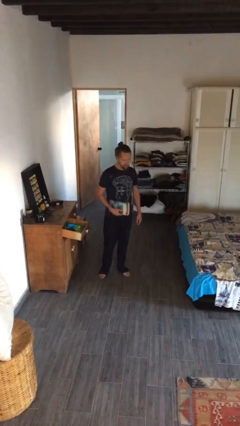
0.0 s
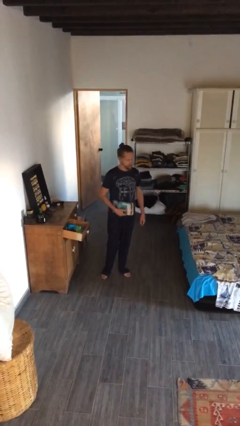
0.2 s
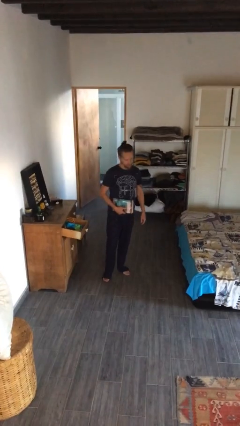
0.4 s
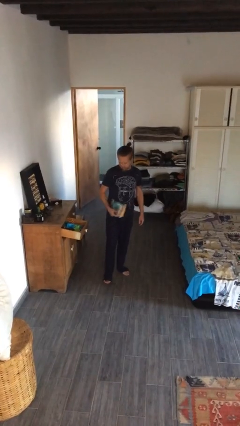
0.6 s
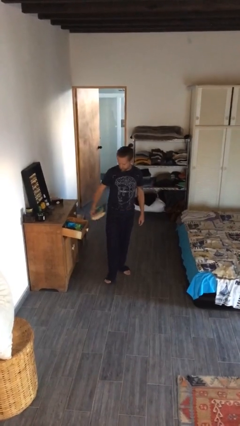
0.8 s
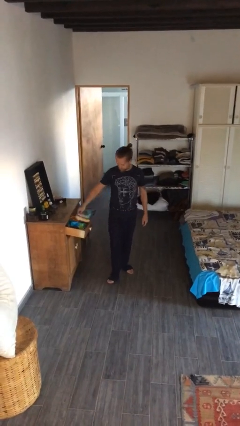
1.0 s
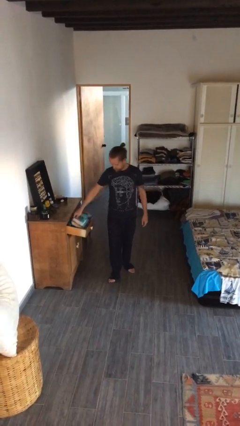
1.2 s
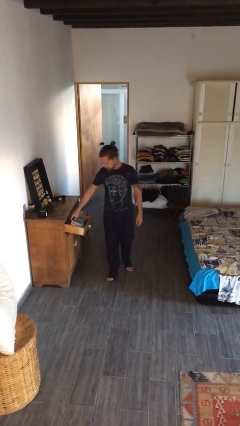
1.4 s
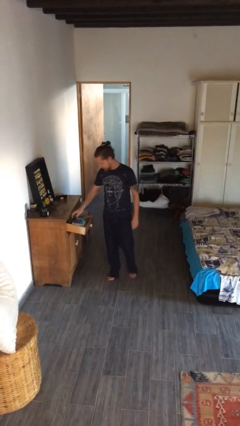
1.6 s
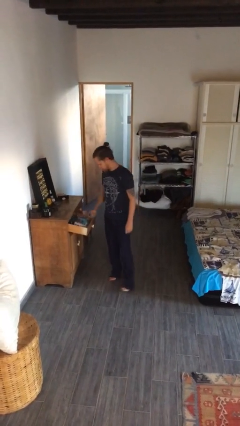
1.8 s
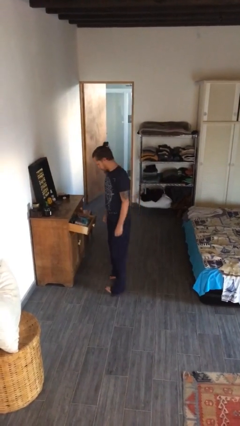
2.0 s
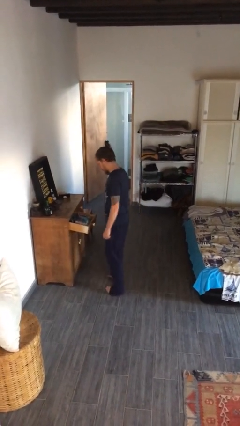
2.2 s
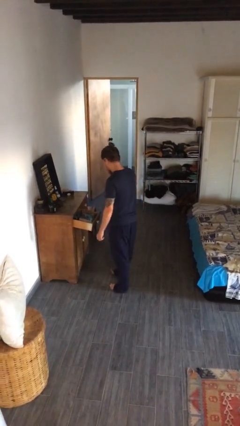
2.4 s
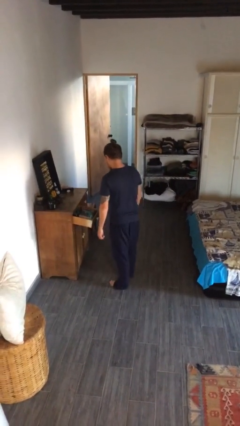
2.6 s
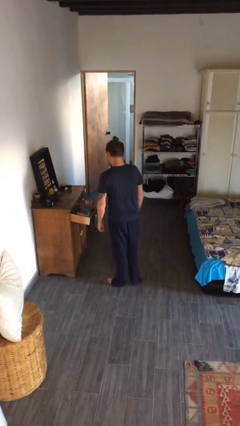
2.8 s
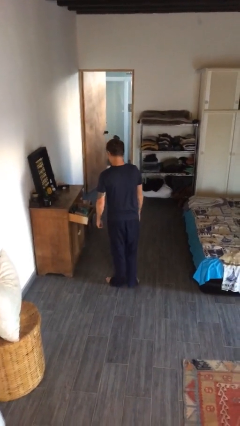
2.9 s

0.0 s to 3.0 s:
person puts down object into cabinet

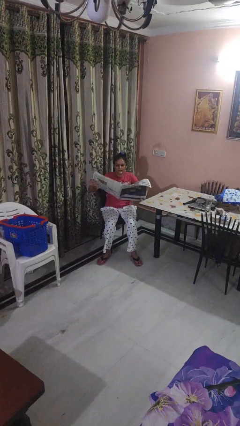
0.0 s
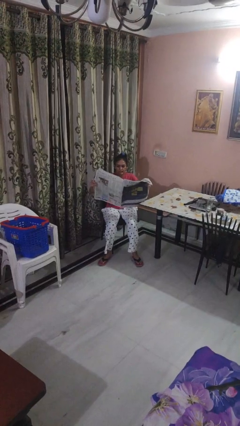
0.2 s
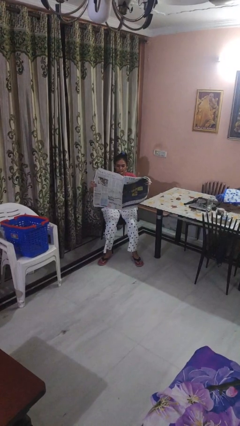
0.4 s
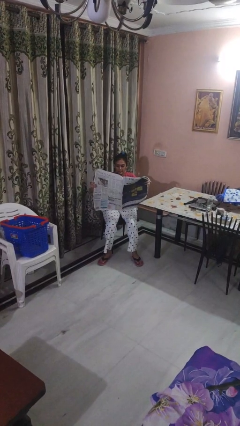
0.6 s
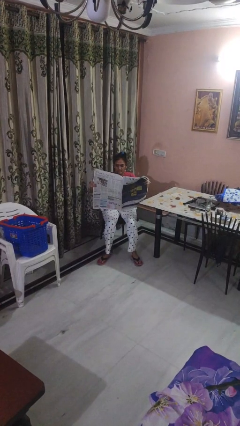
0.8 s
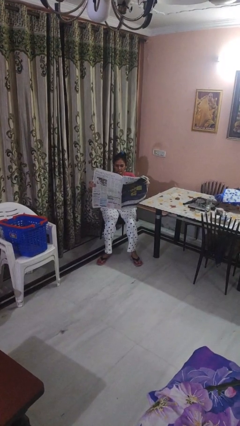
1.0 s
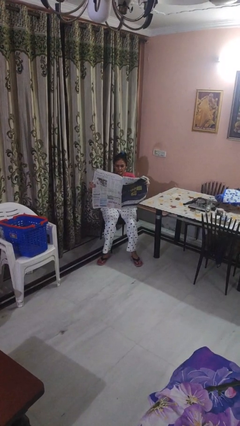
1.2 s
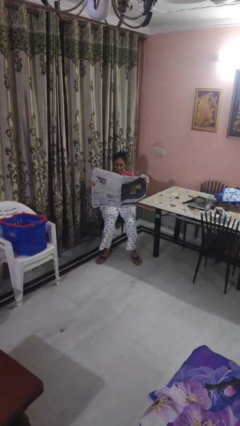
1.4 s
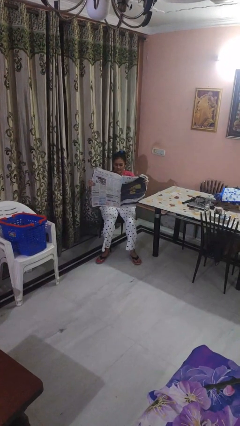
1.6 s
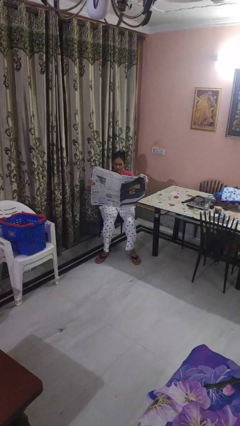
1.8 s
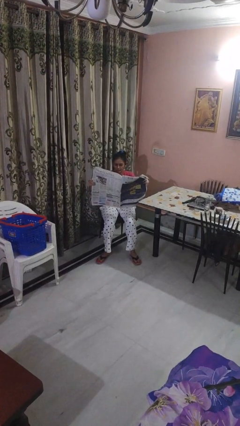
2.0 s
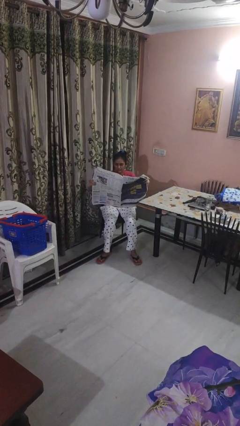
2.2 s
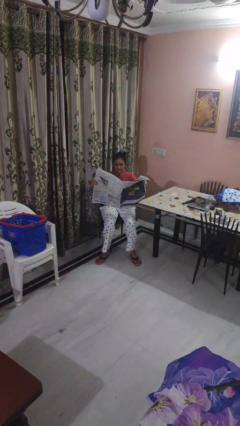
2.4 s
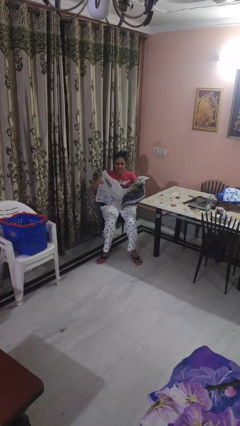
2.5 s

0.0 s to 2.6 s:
person reads newspaper

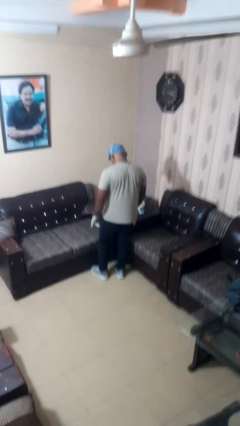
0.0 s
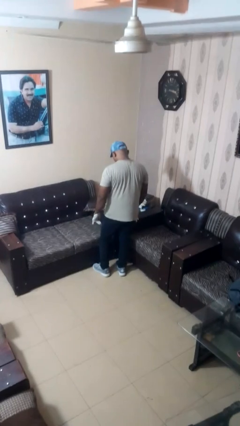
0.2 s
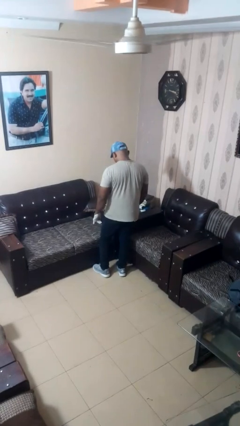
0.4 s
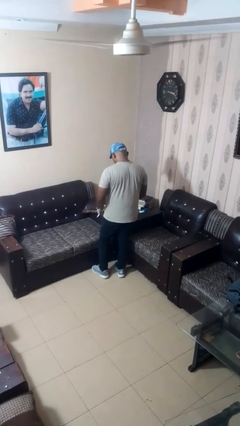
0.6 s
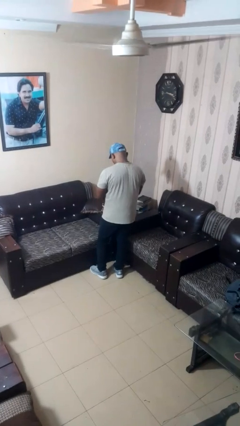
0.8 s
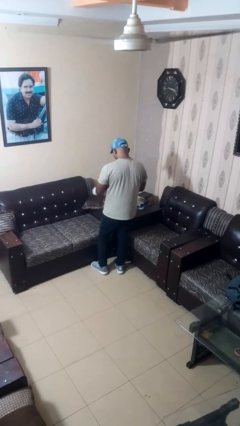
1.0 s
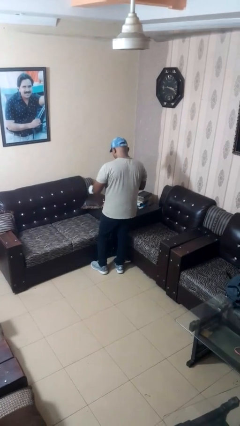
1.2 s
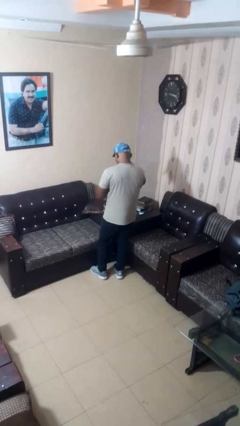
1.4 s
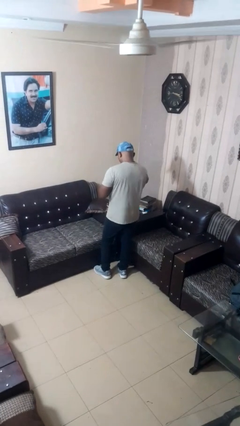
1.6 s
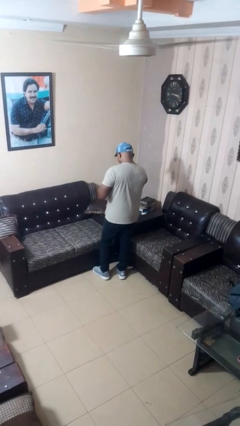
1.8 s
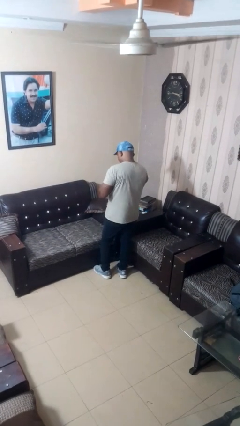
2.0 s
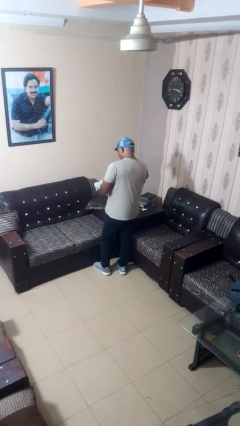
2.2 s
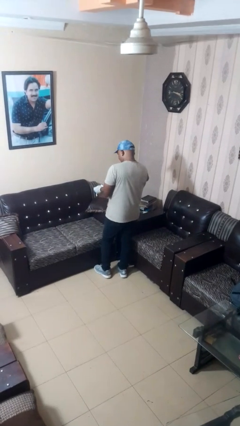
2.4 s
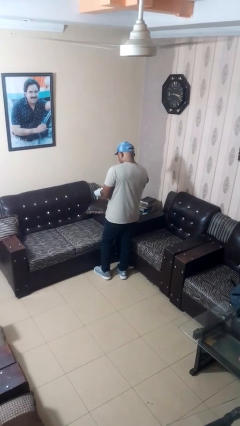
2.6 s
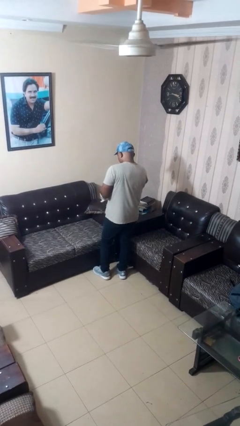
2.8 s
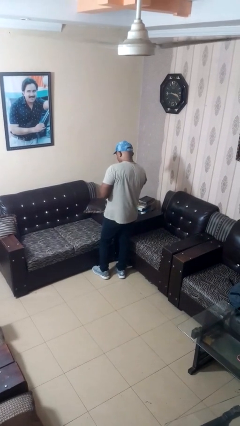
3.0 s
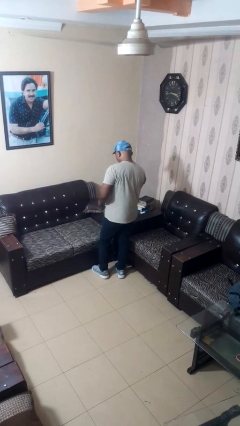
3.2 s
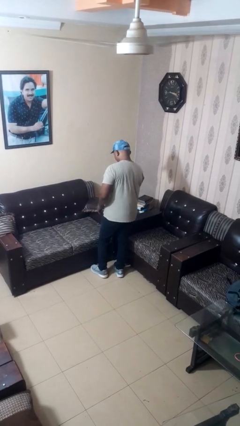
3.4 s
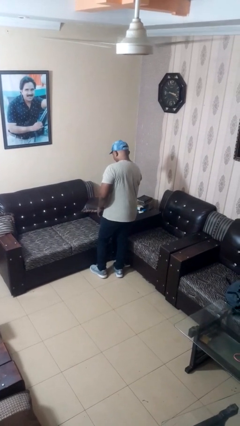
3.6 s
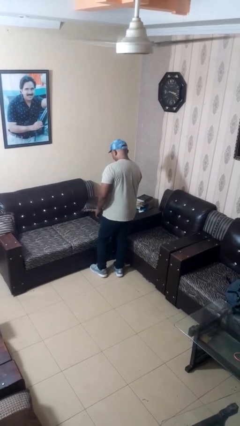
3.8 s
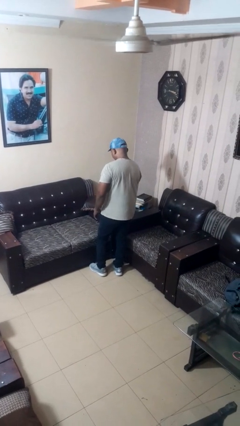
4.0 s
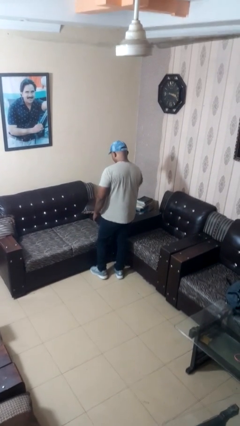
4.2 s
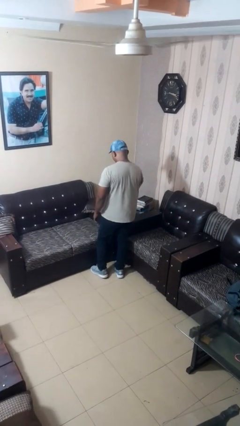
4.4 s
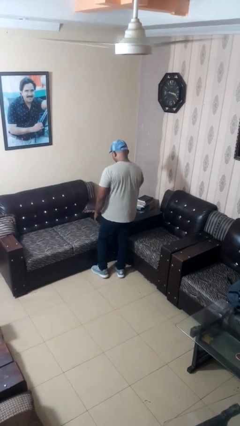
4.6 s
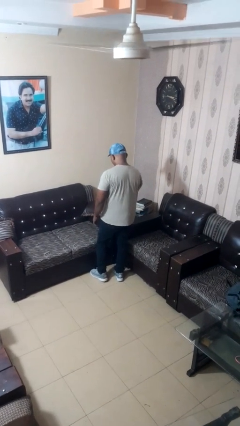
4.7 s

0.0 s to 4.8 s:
person takes off gloves

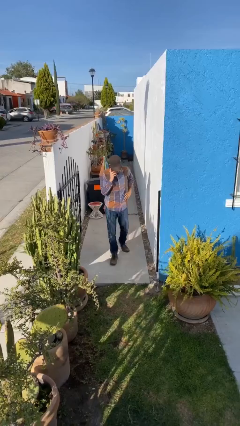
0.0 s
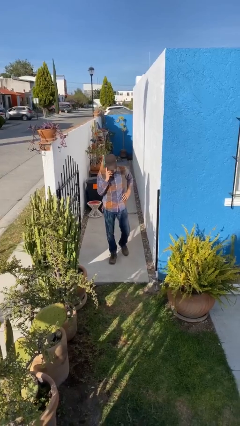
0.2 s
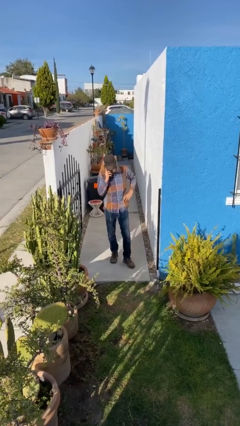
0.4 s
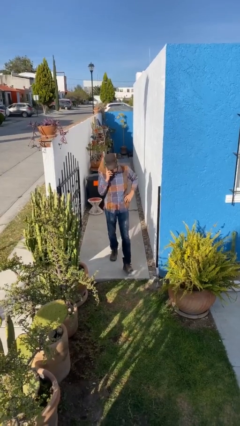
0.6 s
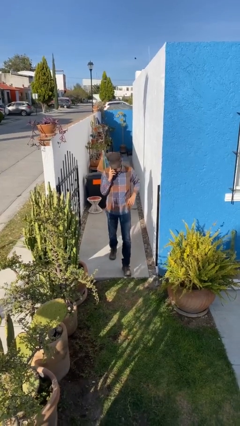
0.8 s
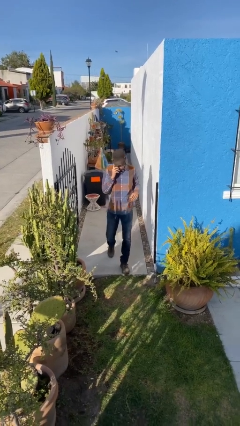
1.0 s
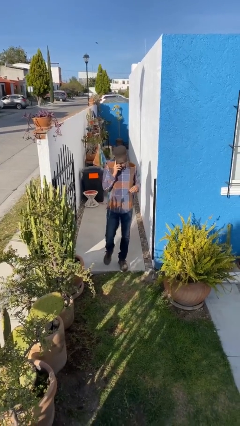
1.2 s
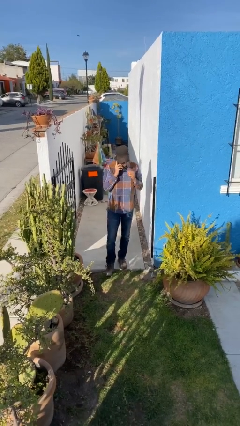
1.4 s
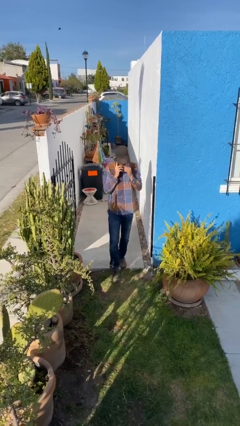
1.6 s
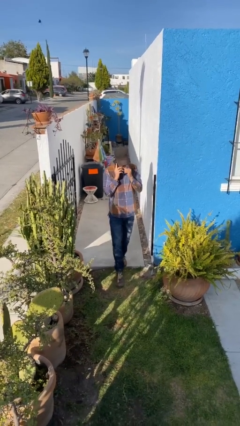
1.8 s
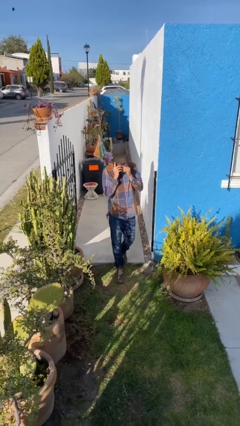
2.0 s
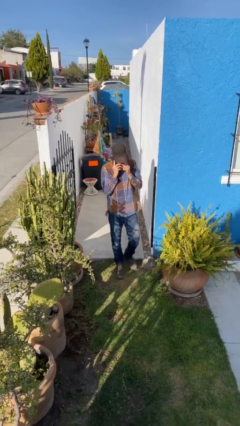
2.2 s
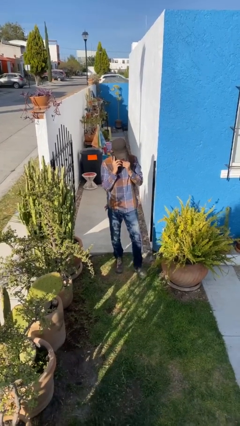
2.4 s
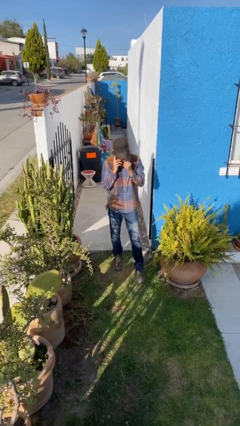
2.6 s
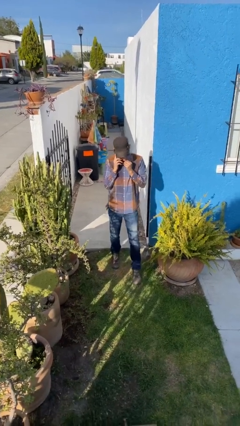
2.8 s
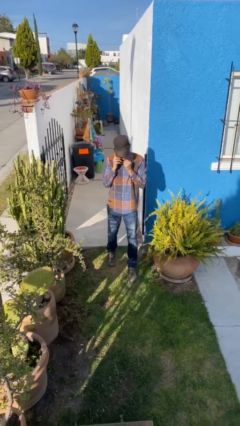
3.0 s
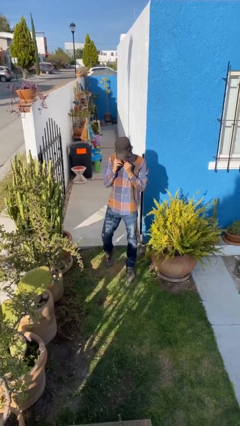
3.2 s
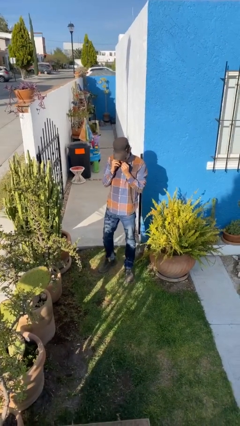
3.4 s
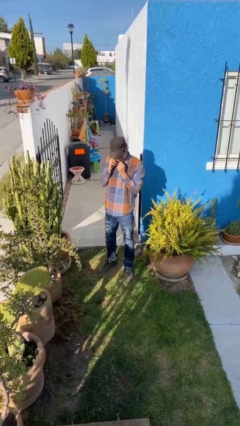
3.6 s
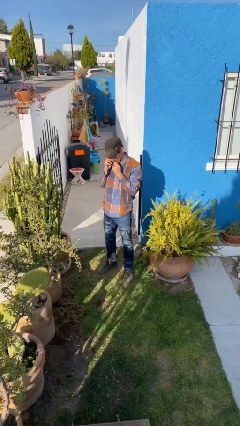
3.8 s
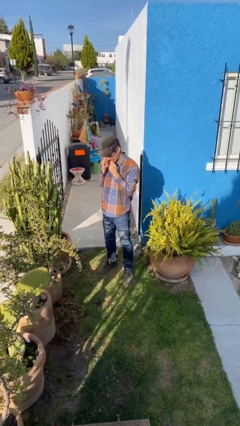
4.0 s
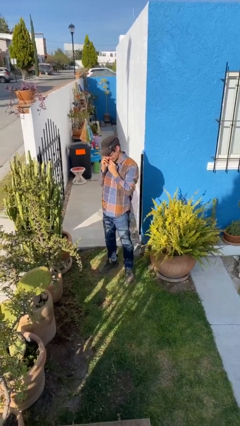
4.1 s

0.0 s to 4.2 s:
person enters scene through structure

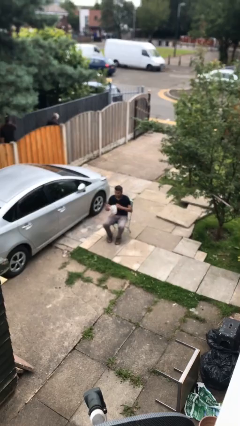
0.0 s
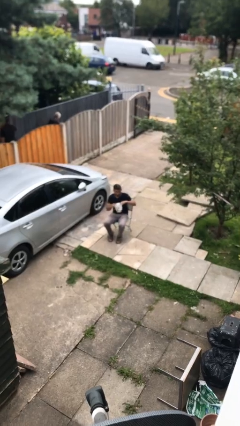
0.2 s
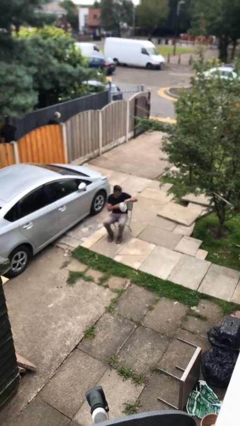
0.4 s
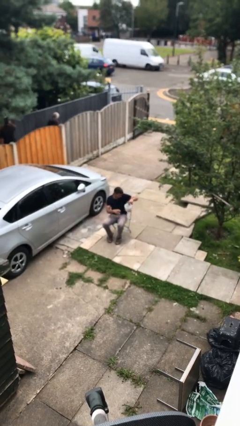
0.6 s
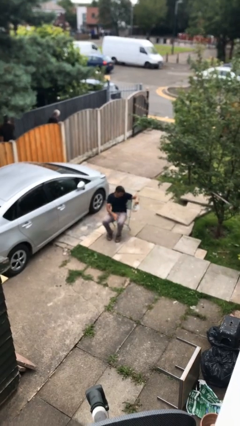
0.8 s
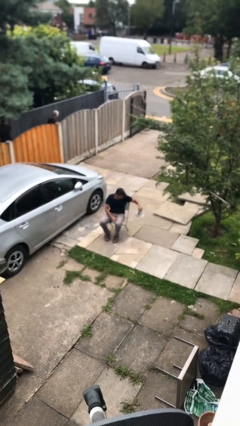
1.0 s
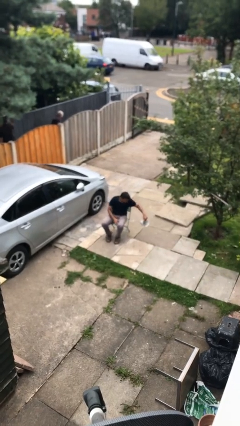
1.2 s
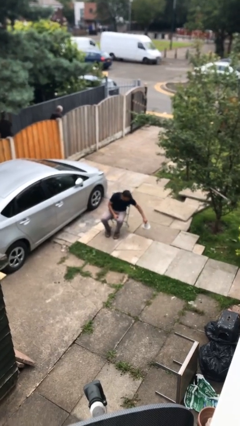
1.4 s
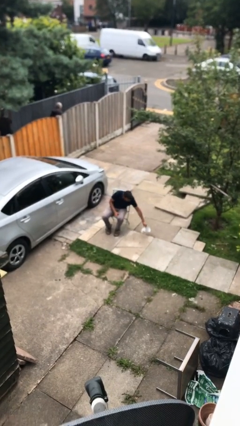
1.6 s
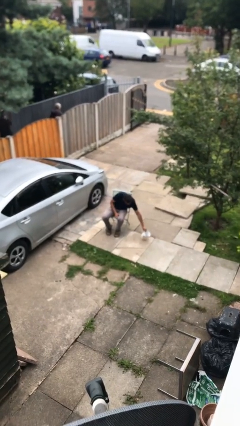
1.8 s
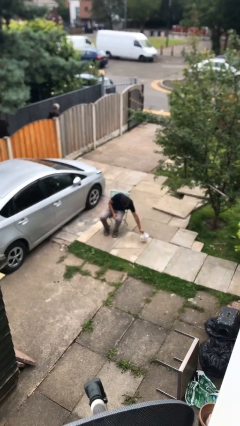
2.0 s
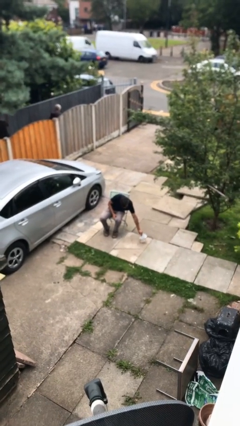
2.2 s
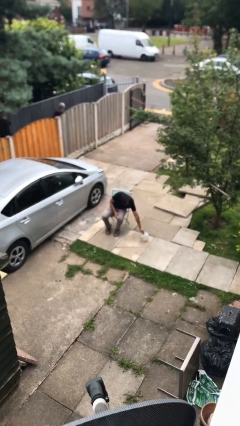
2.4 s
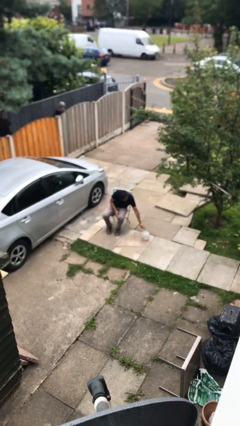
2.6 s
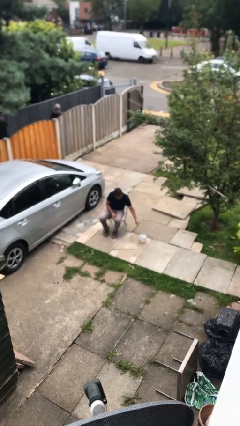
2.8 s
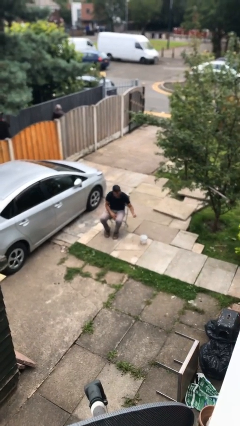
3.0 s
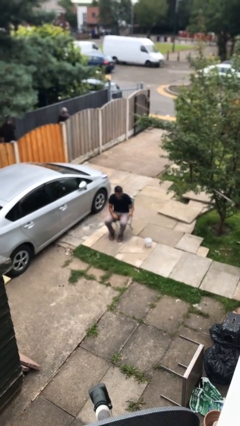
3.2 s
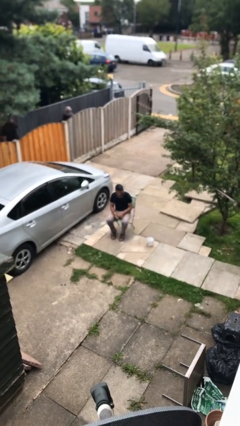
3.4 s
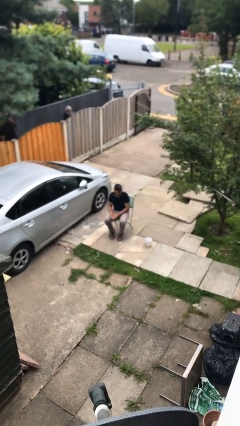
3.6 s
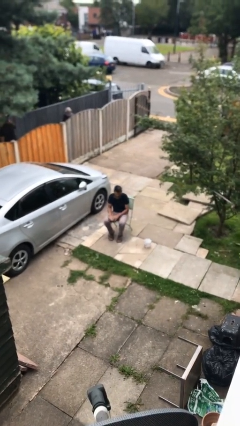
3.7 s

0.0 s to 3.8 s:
person puts down object on floor
